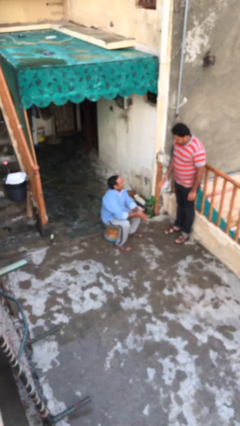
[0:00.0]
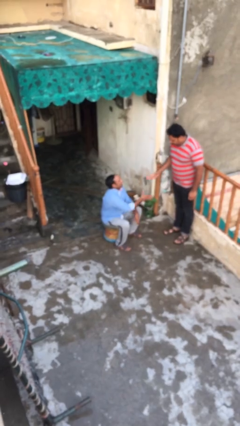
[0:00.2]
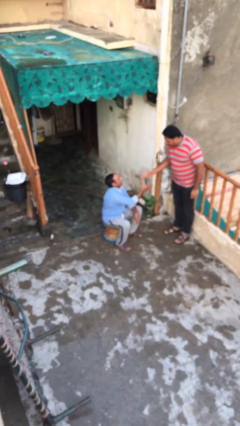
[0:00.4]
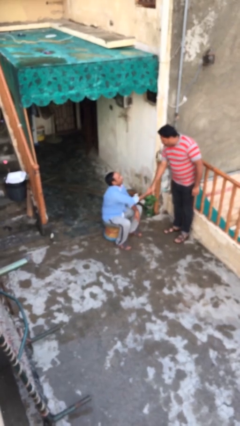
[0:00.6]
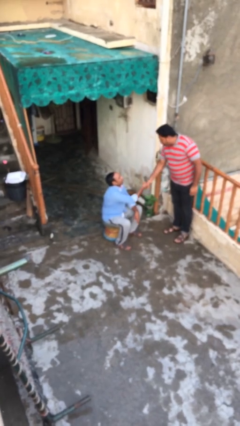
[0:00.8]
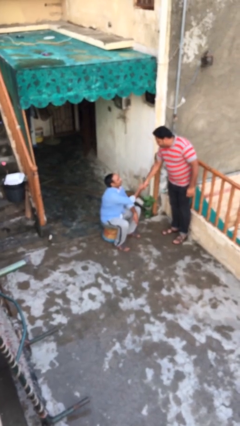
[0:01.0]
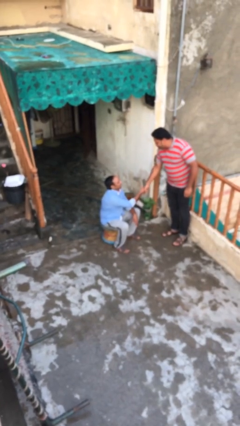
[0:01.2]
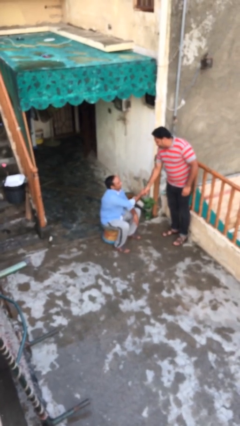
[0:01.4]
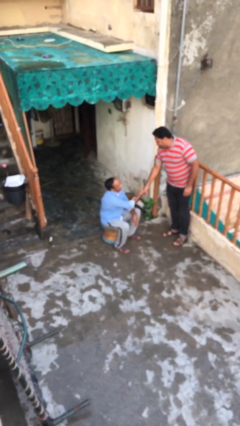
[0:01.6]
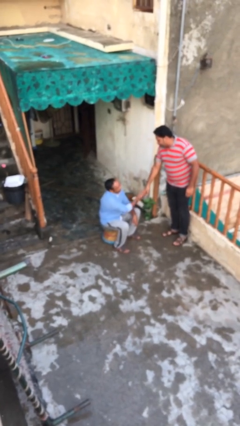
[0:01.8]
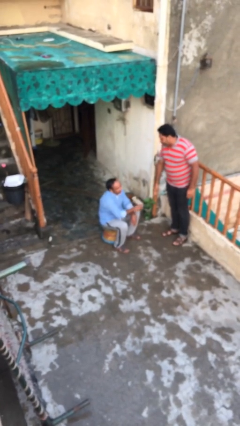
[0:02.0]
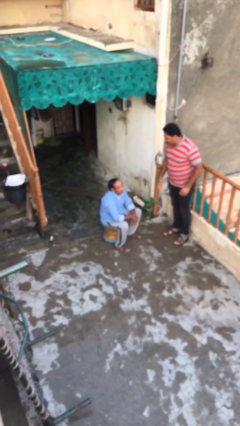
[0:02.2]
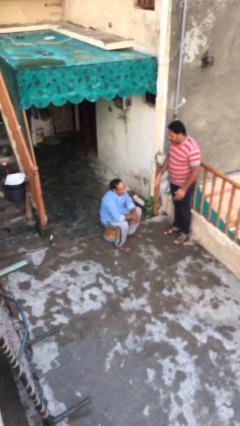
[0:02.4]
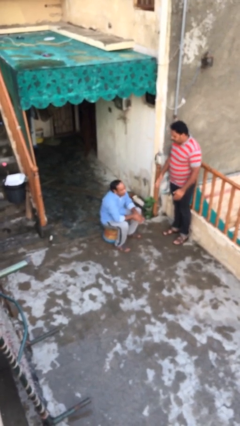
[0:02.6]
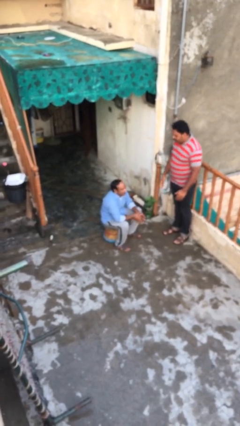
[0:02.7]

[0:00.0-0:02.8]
person shakes hand

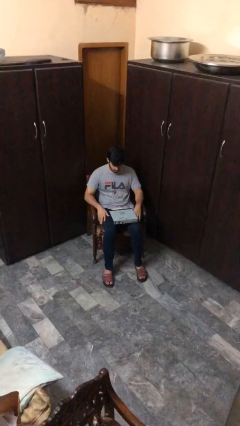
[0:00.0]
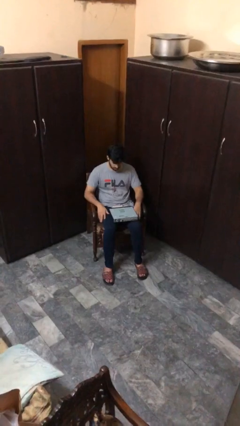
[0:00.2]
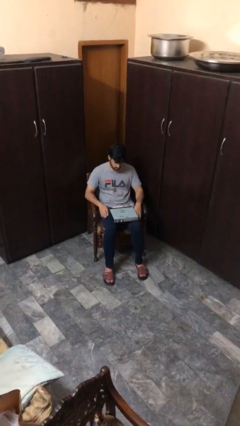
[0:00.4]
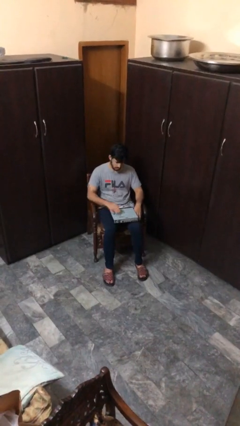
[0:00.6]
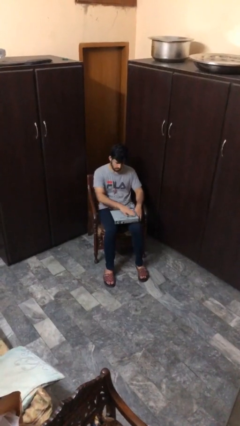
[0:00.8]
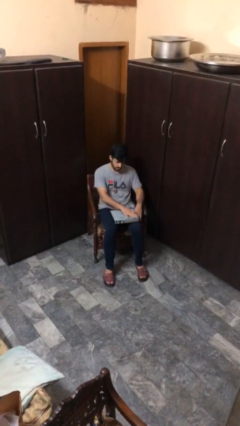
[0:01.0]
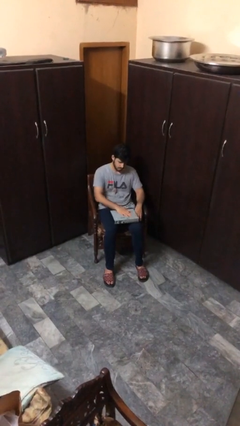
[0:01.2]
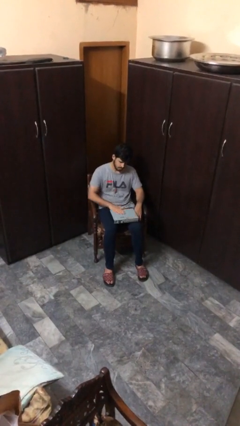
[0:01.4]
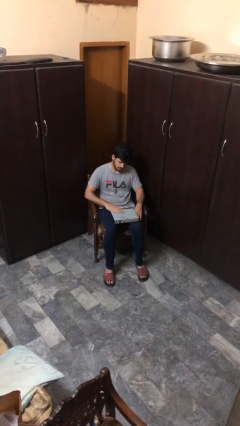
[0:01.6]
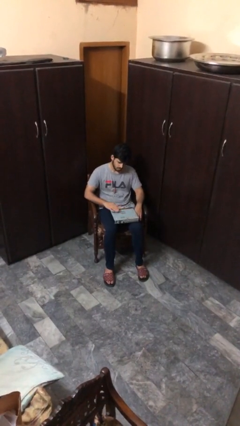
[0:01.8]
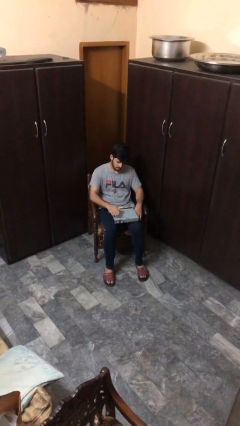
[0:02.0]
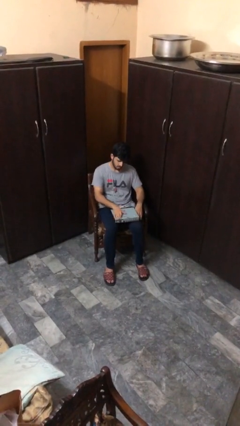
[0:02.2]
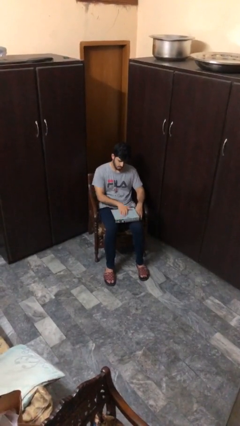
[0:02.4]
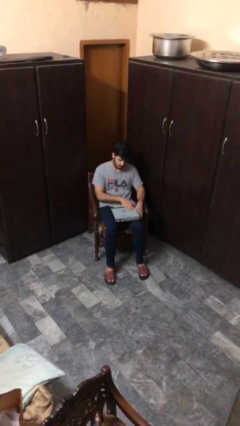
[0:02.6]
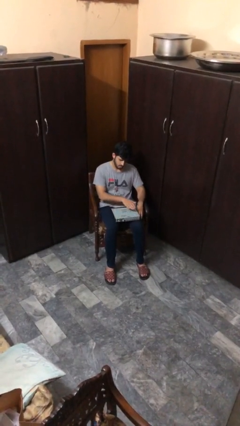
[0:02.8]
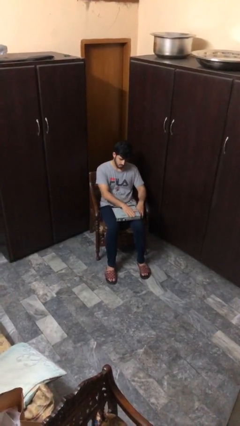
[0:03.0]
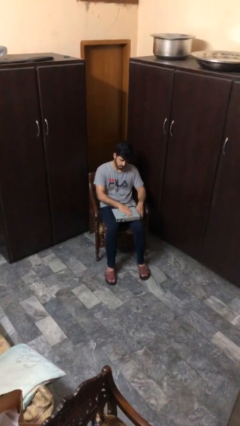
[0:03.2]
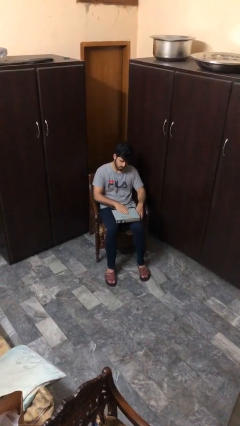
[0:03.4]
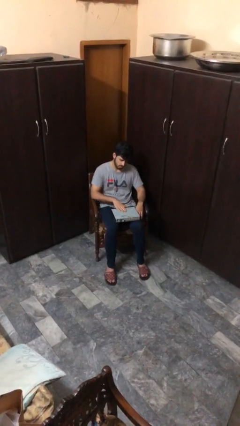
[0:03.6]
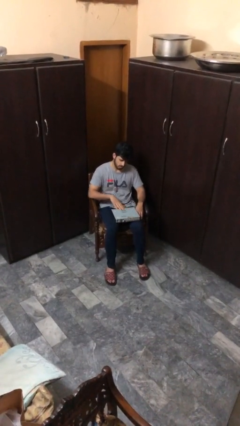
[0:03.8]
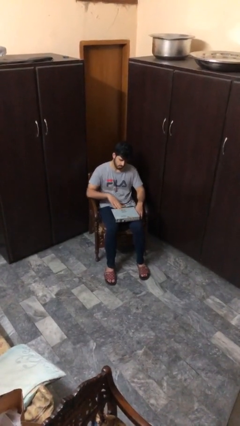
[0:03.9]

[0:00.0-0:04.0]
person waves hand over object

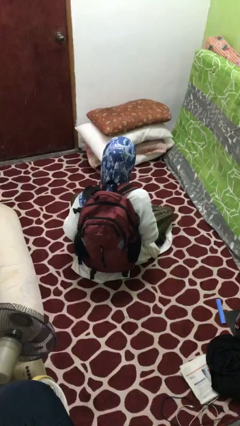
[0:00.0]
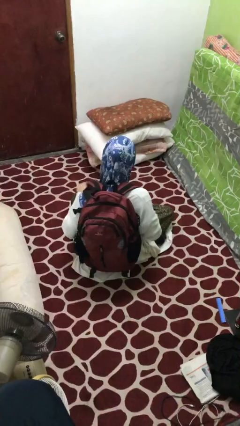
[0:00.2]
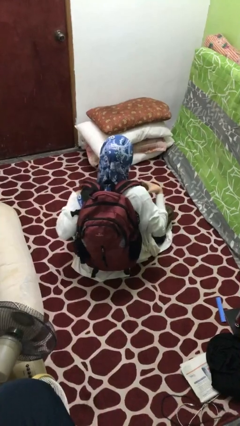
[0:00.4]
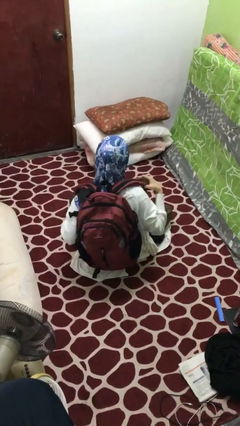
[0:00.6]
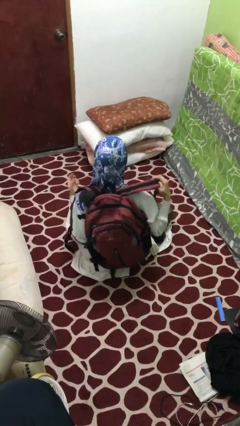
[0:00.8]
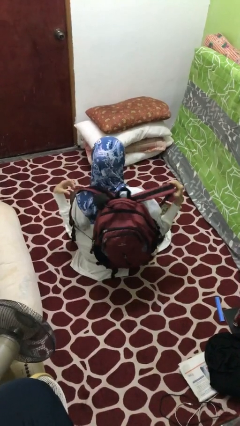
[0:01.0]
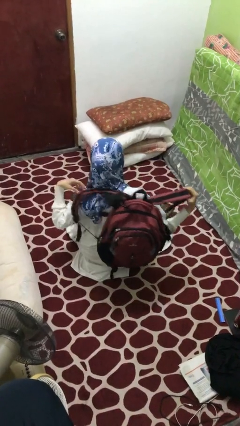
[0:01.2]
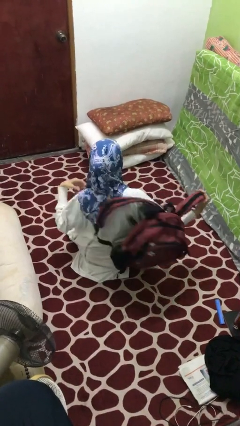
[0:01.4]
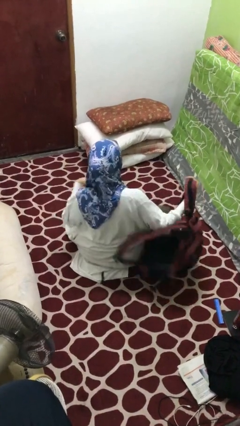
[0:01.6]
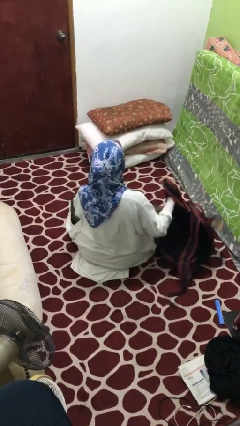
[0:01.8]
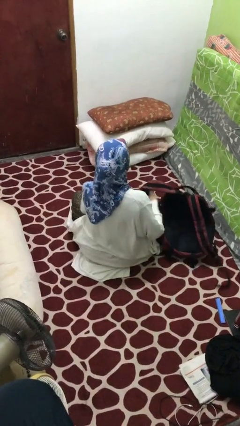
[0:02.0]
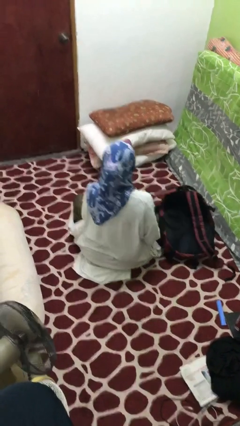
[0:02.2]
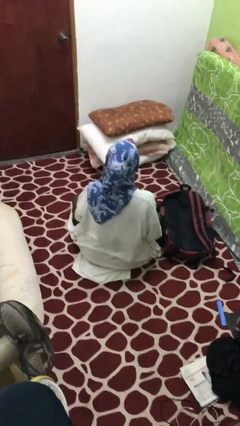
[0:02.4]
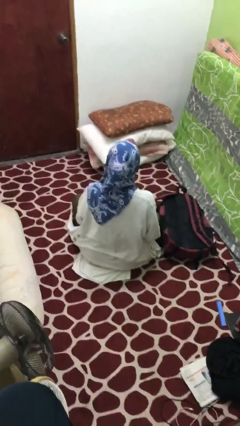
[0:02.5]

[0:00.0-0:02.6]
person takes off backpack

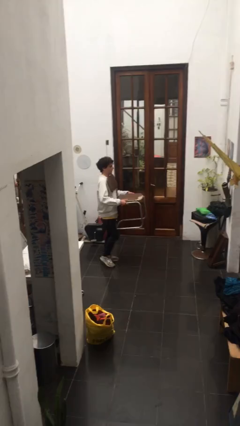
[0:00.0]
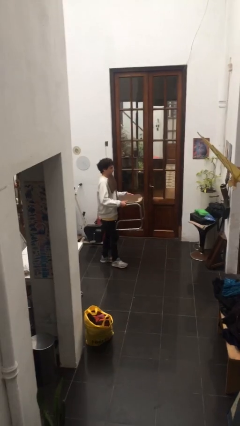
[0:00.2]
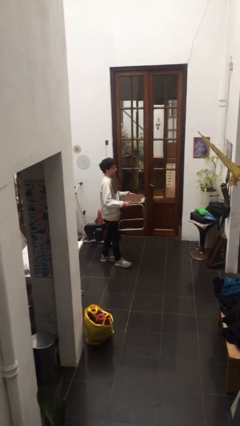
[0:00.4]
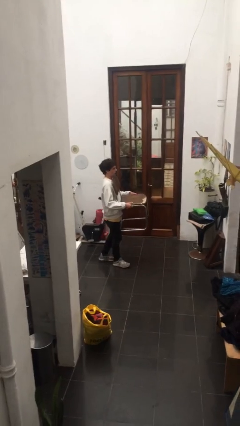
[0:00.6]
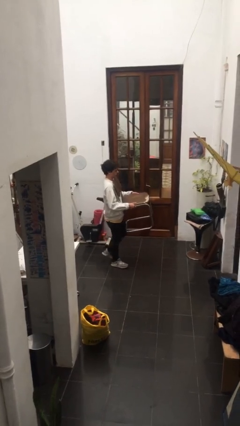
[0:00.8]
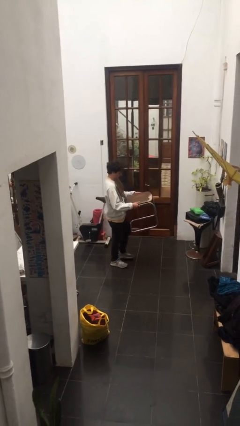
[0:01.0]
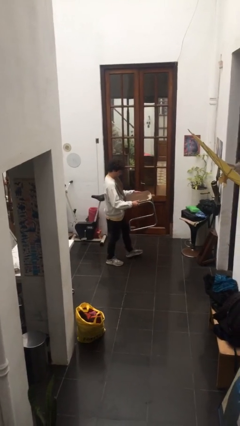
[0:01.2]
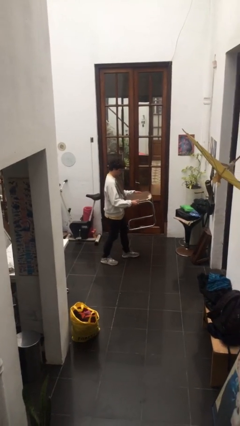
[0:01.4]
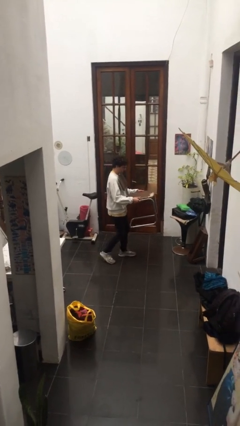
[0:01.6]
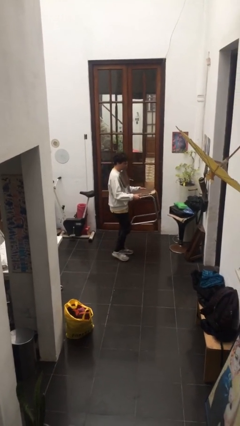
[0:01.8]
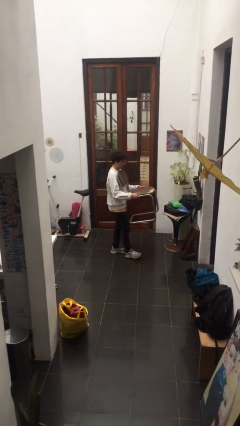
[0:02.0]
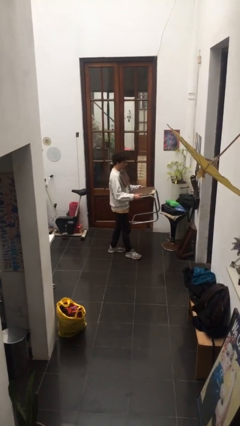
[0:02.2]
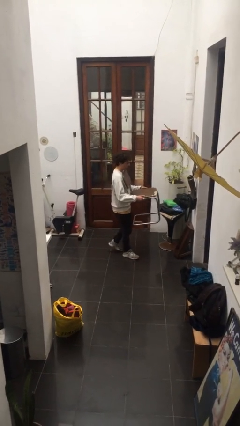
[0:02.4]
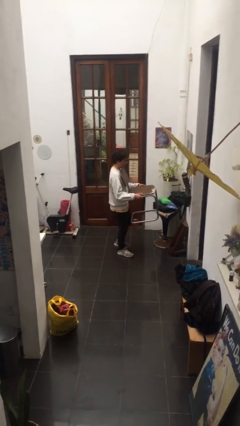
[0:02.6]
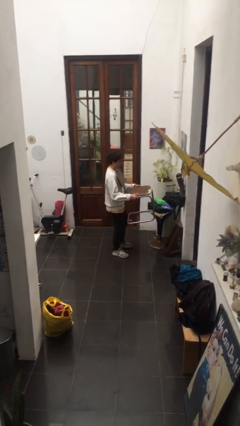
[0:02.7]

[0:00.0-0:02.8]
person carries heavy object

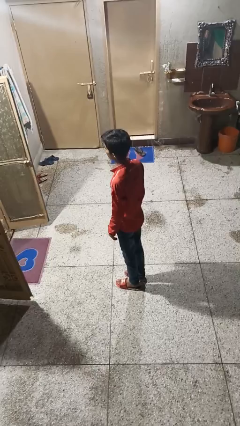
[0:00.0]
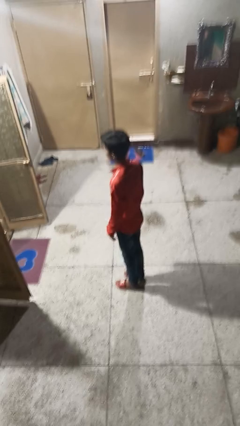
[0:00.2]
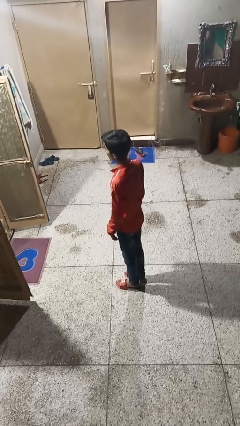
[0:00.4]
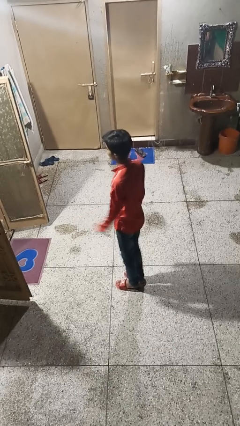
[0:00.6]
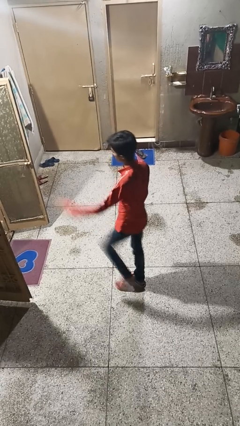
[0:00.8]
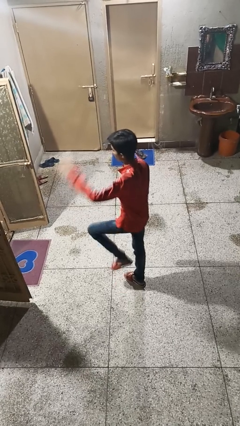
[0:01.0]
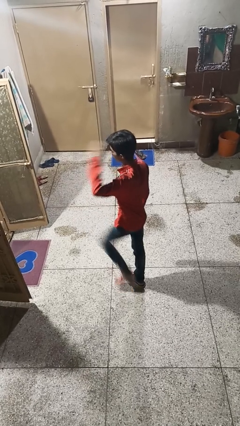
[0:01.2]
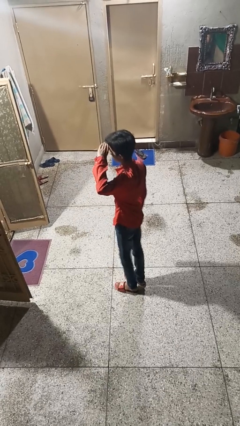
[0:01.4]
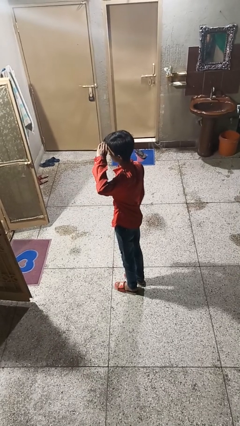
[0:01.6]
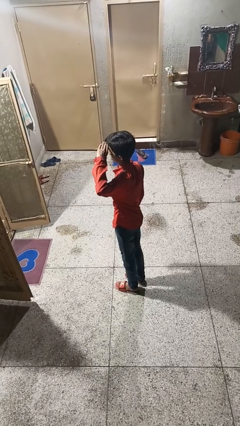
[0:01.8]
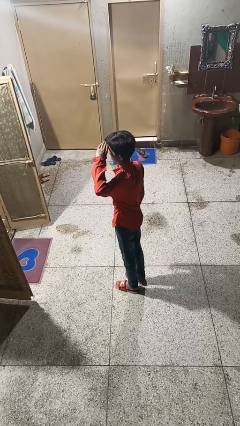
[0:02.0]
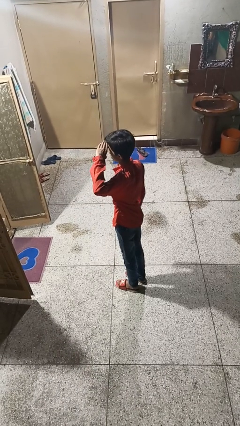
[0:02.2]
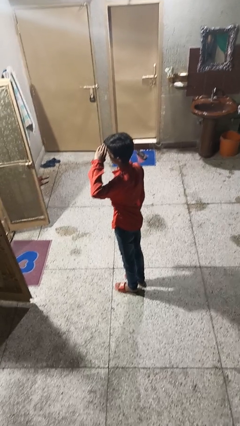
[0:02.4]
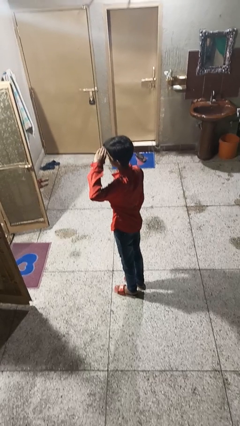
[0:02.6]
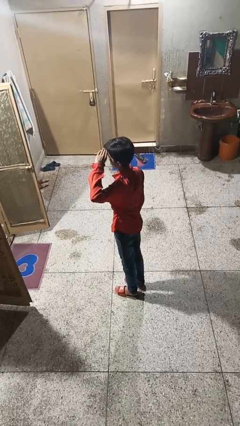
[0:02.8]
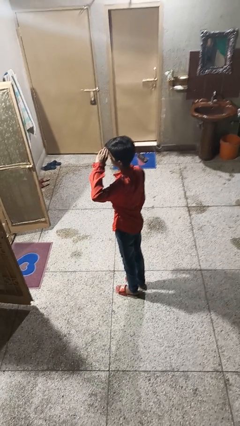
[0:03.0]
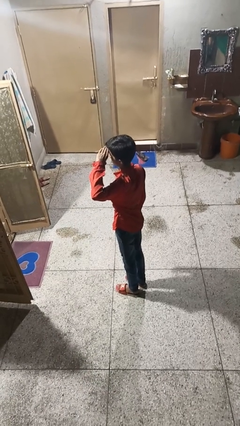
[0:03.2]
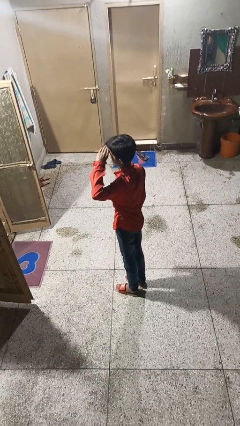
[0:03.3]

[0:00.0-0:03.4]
person salutes

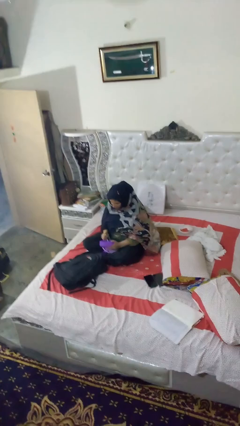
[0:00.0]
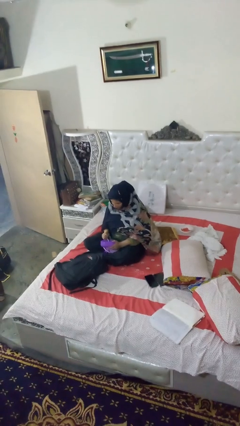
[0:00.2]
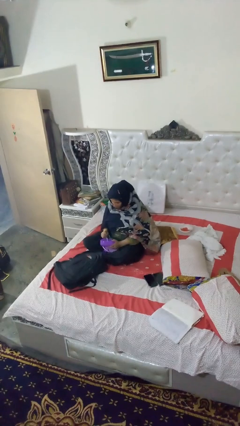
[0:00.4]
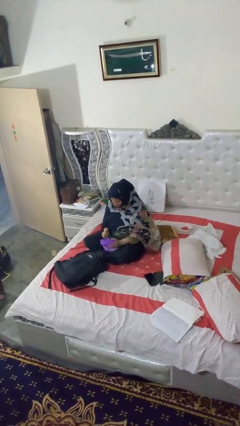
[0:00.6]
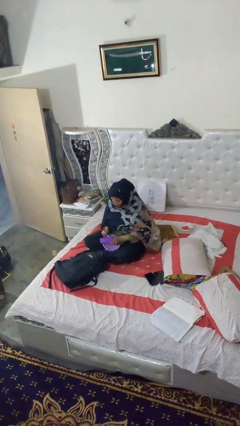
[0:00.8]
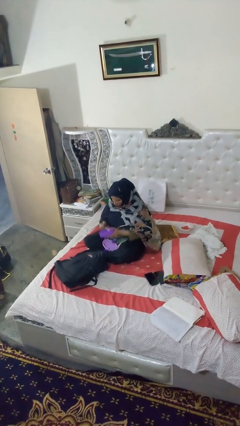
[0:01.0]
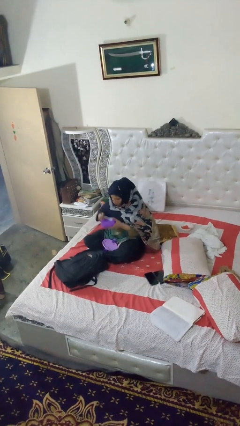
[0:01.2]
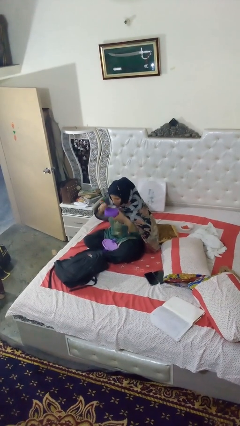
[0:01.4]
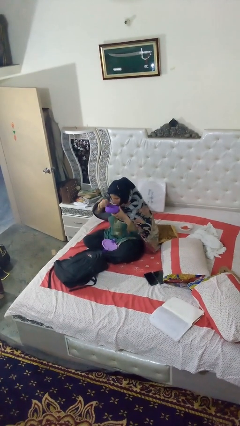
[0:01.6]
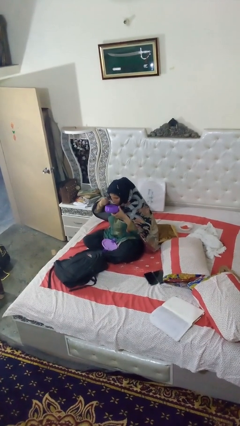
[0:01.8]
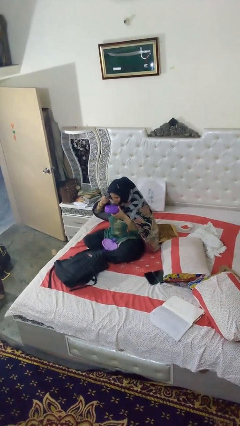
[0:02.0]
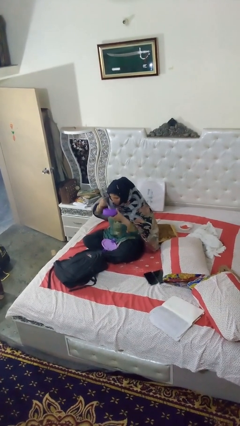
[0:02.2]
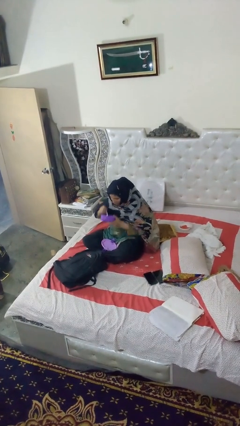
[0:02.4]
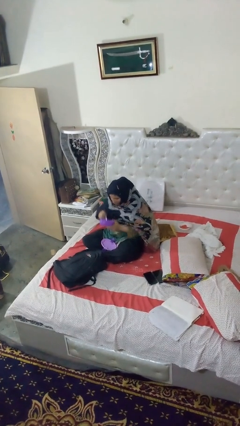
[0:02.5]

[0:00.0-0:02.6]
person eats snack from bag
